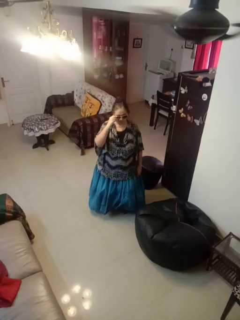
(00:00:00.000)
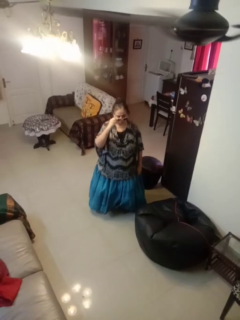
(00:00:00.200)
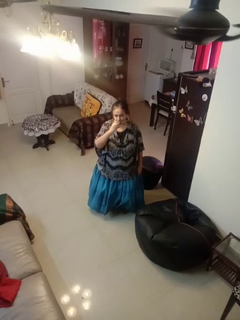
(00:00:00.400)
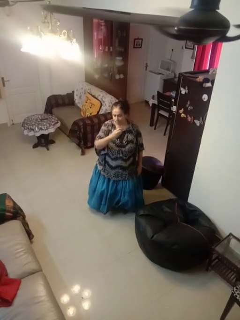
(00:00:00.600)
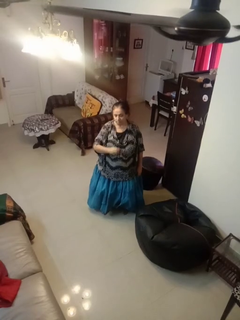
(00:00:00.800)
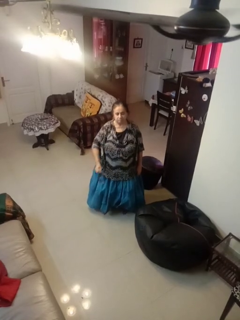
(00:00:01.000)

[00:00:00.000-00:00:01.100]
person takes off sunglasses

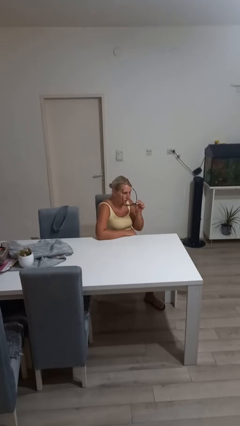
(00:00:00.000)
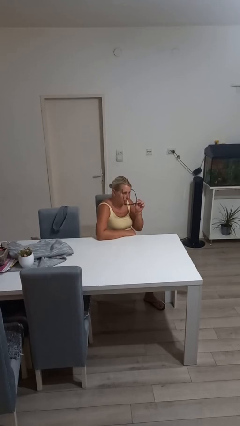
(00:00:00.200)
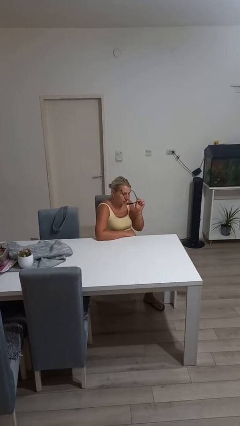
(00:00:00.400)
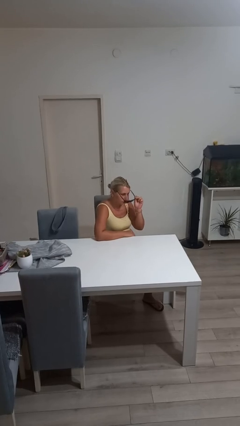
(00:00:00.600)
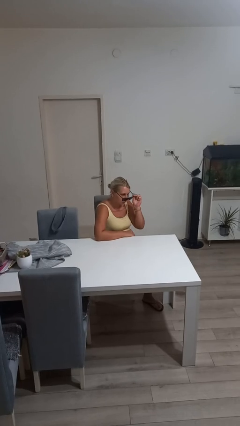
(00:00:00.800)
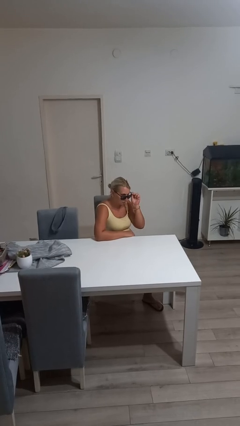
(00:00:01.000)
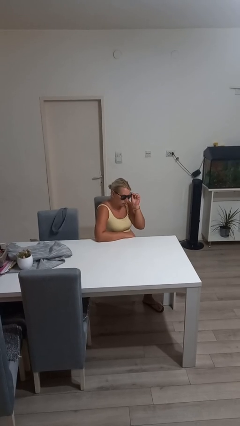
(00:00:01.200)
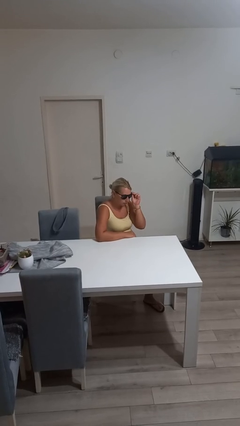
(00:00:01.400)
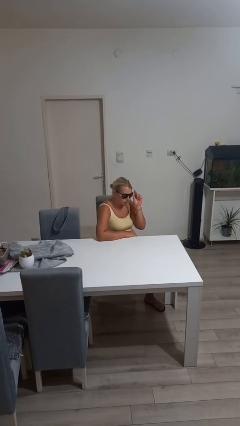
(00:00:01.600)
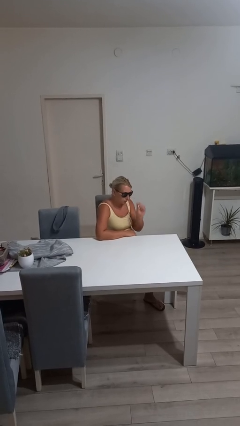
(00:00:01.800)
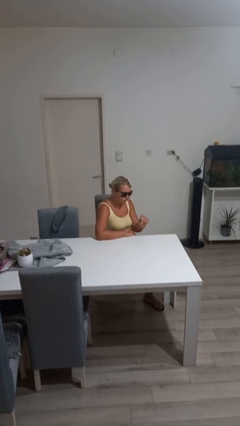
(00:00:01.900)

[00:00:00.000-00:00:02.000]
person puts on sunglasses

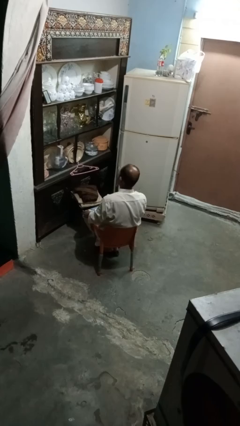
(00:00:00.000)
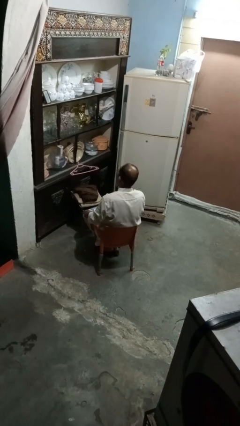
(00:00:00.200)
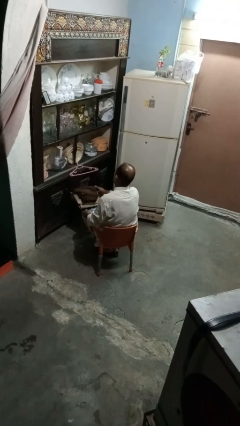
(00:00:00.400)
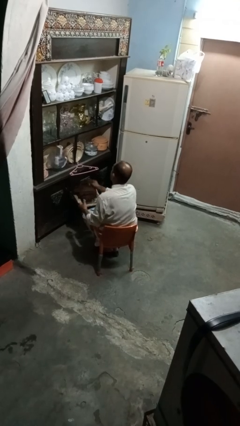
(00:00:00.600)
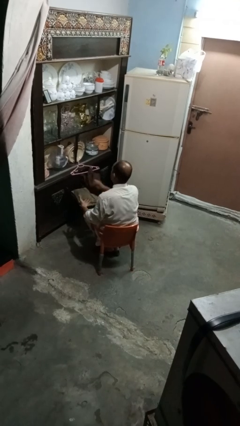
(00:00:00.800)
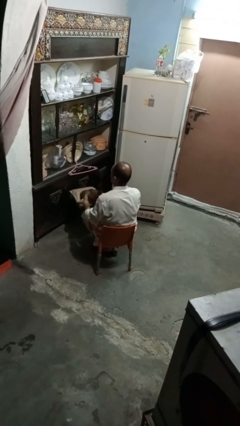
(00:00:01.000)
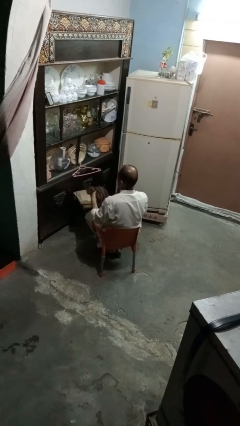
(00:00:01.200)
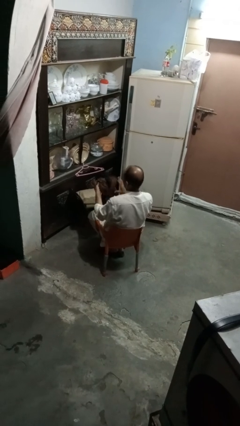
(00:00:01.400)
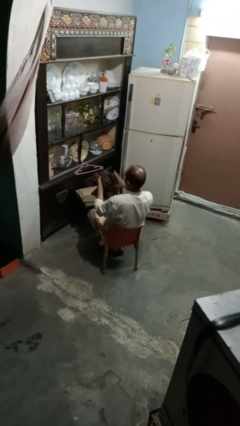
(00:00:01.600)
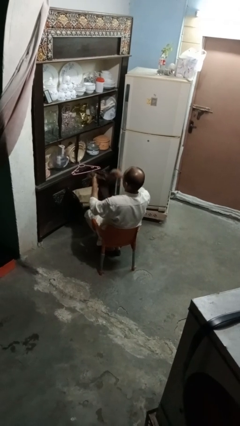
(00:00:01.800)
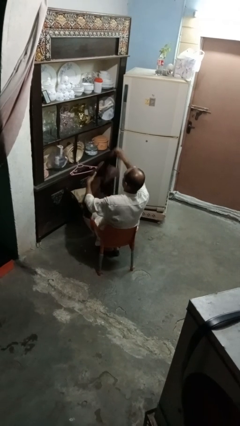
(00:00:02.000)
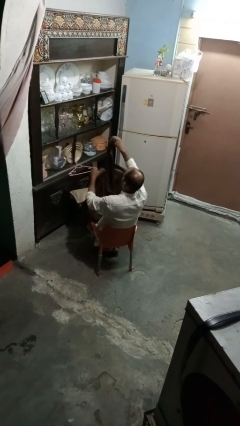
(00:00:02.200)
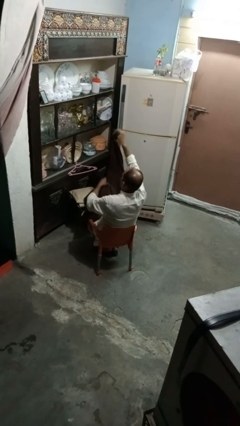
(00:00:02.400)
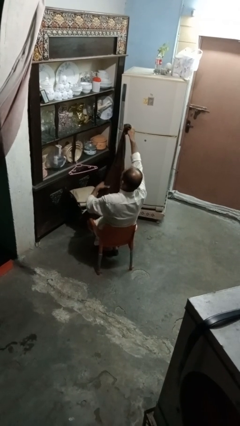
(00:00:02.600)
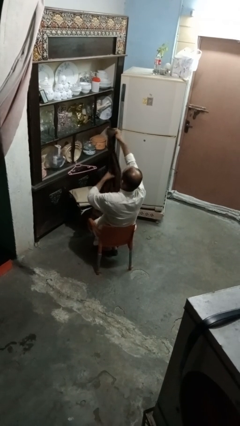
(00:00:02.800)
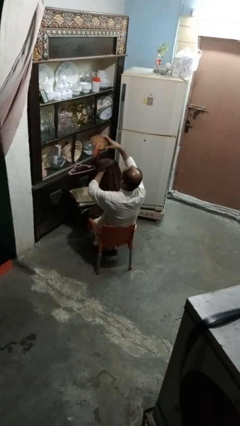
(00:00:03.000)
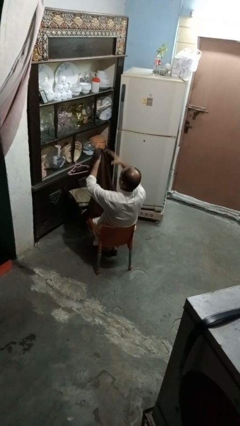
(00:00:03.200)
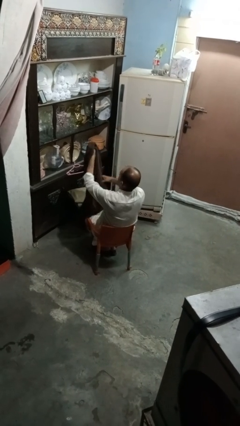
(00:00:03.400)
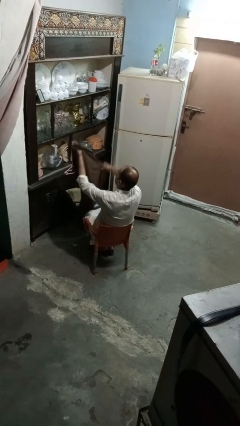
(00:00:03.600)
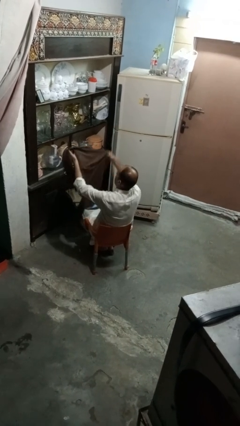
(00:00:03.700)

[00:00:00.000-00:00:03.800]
person folds shirt

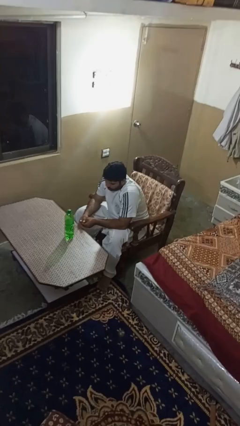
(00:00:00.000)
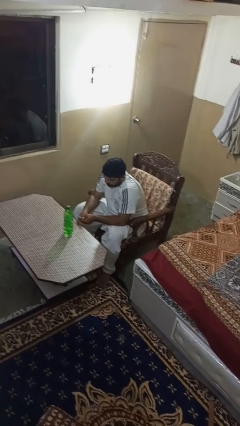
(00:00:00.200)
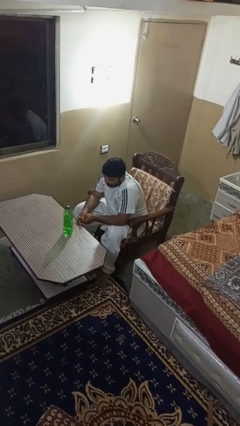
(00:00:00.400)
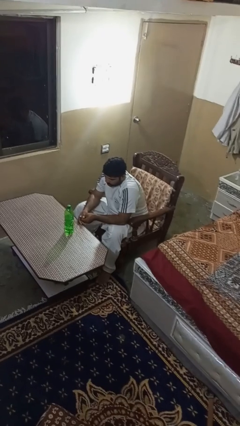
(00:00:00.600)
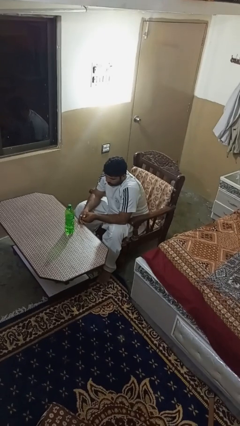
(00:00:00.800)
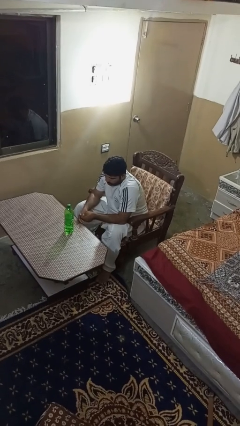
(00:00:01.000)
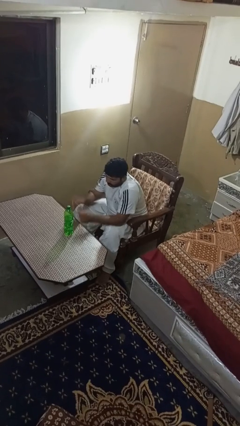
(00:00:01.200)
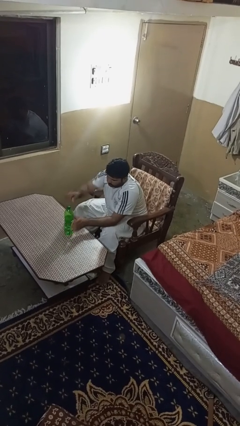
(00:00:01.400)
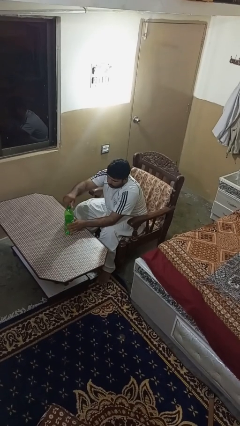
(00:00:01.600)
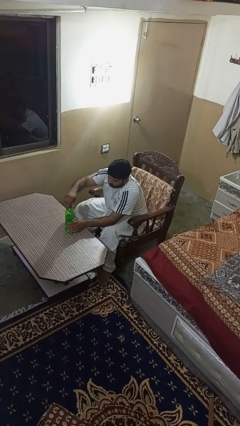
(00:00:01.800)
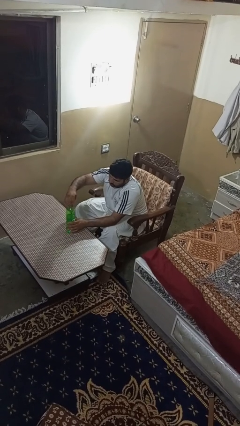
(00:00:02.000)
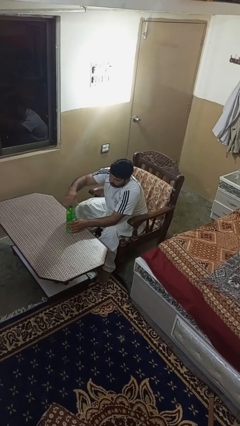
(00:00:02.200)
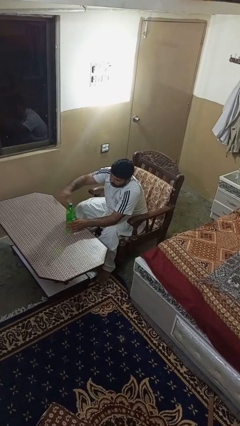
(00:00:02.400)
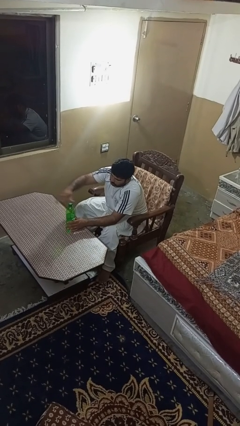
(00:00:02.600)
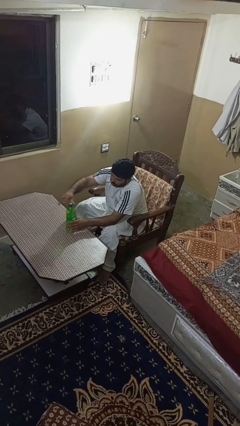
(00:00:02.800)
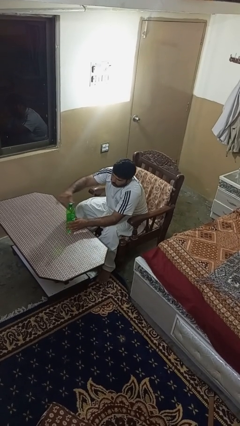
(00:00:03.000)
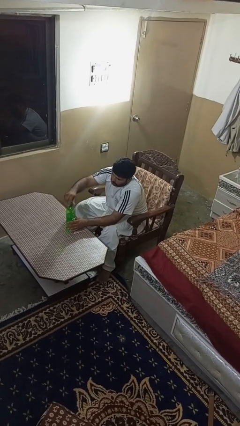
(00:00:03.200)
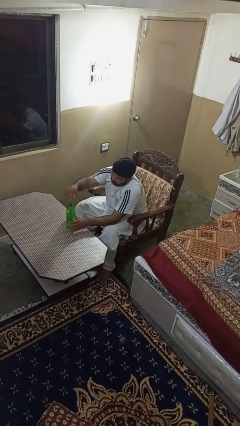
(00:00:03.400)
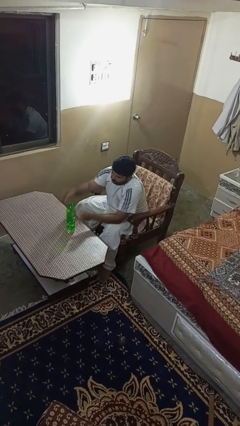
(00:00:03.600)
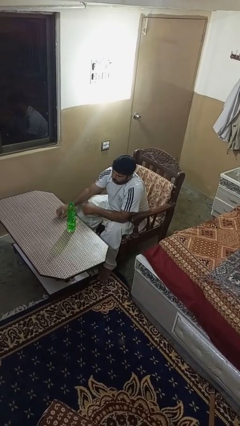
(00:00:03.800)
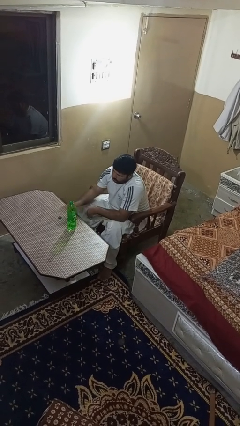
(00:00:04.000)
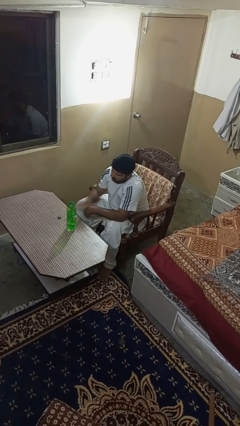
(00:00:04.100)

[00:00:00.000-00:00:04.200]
person unscrews lid from bottle

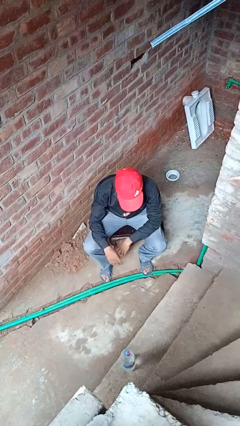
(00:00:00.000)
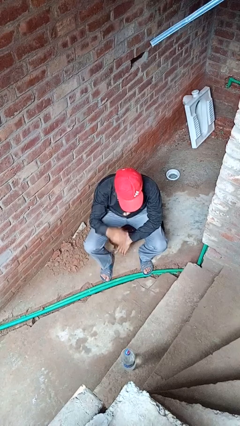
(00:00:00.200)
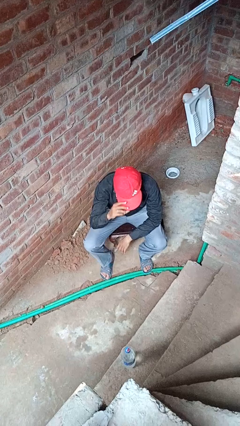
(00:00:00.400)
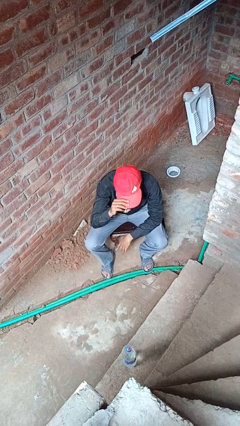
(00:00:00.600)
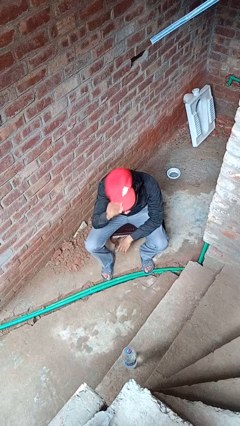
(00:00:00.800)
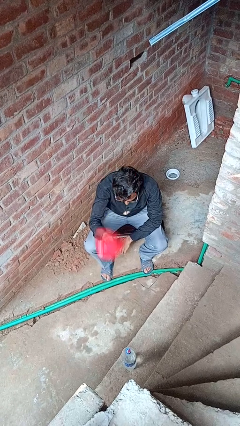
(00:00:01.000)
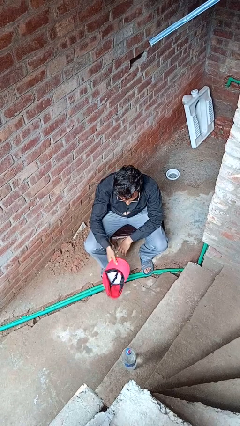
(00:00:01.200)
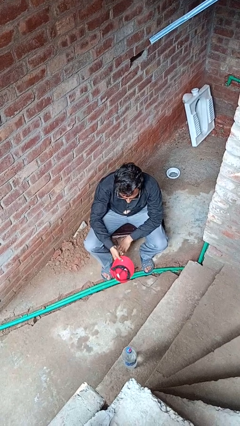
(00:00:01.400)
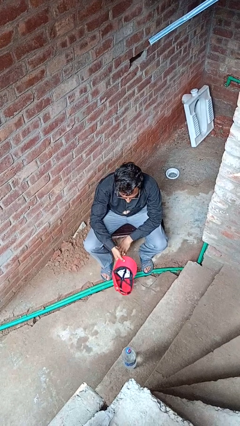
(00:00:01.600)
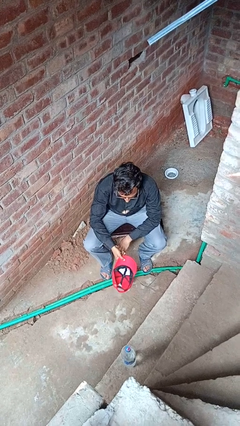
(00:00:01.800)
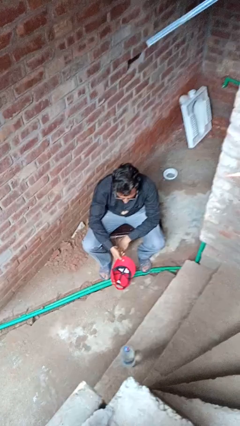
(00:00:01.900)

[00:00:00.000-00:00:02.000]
person takes off hat

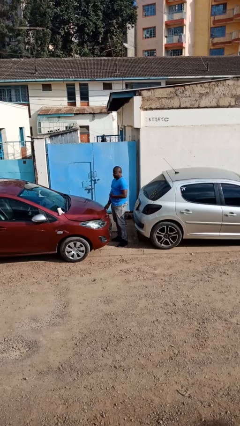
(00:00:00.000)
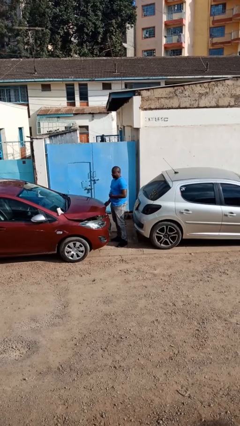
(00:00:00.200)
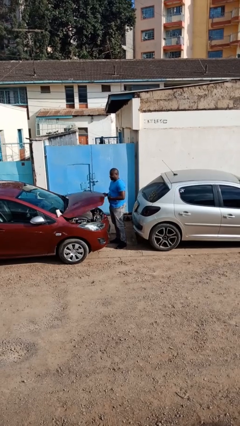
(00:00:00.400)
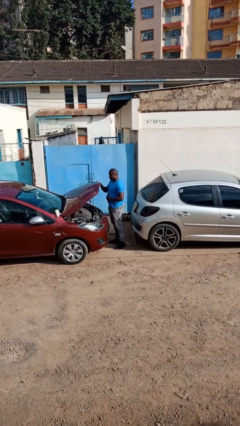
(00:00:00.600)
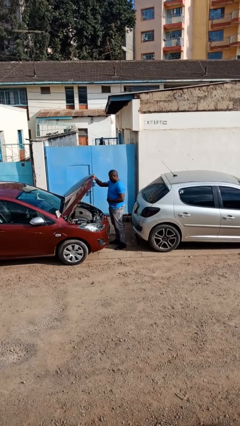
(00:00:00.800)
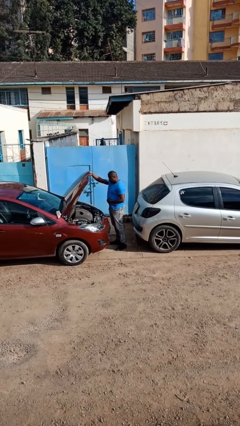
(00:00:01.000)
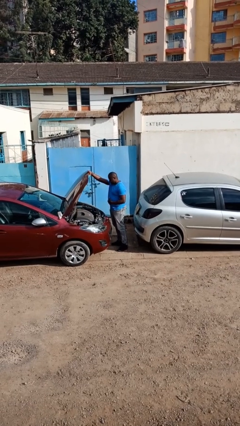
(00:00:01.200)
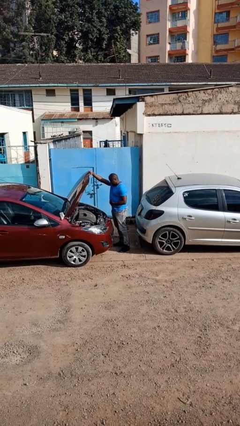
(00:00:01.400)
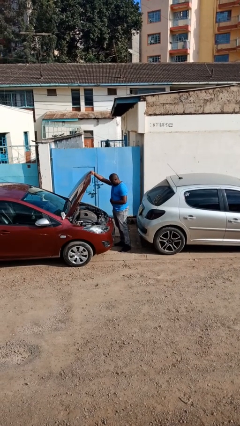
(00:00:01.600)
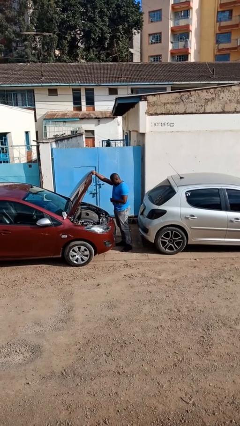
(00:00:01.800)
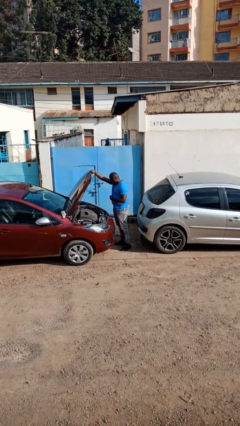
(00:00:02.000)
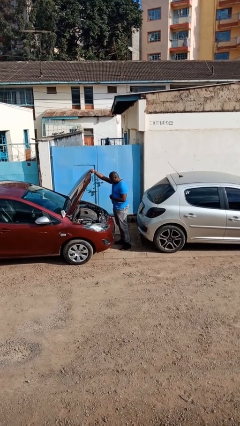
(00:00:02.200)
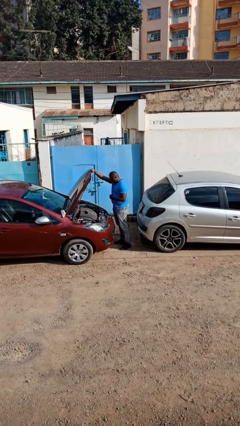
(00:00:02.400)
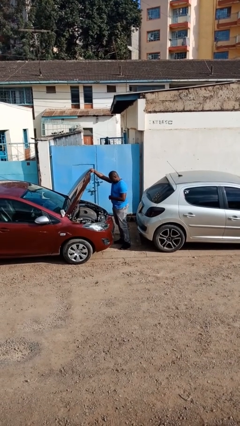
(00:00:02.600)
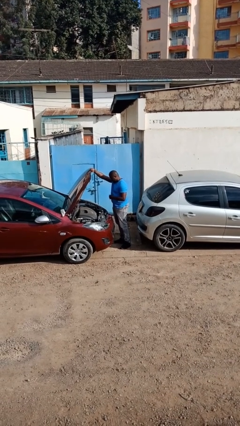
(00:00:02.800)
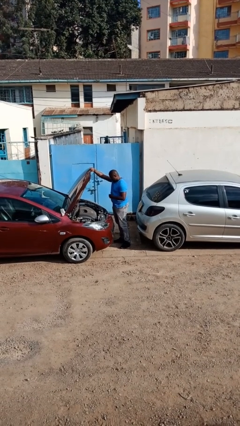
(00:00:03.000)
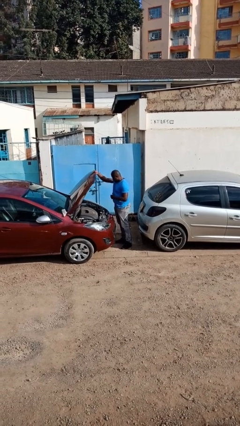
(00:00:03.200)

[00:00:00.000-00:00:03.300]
person opens car hood

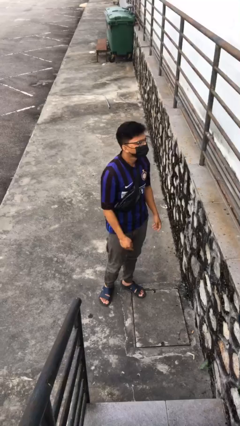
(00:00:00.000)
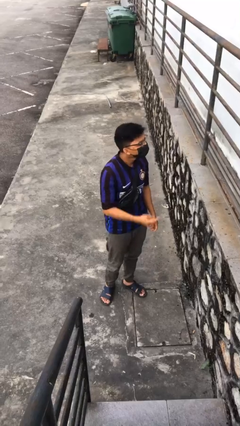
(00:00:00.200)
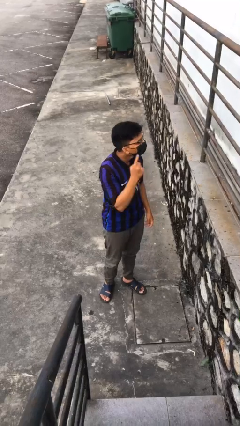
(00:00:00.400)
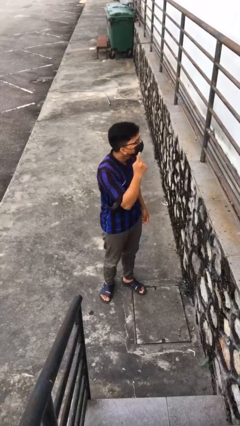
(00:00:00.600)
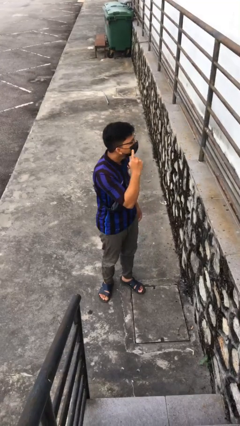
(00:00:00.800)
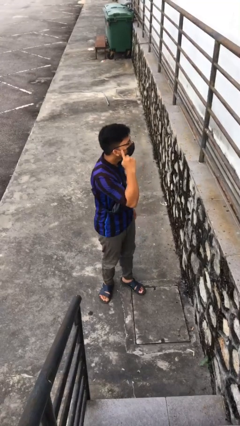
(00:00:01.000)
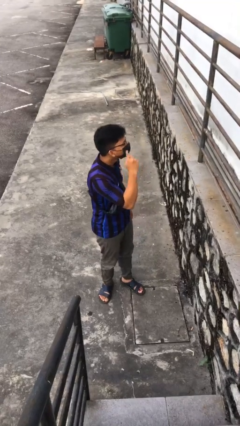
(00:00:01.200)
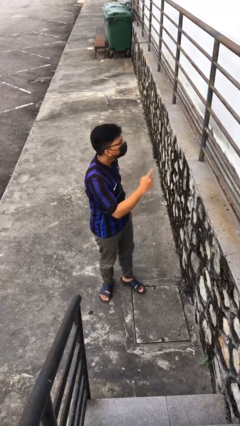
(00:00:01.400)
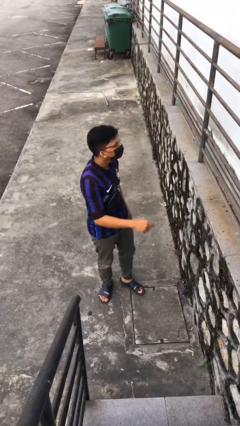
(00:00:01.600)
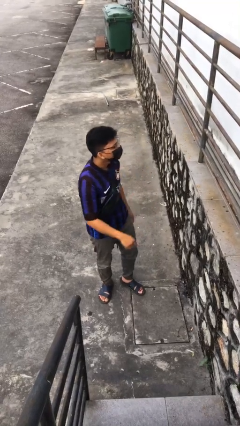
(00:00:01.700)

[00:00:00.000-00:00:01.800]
person gestures listen closely
